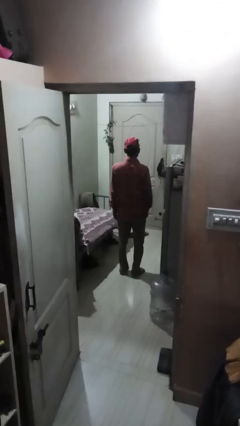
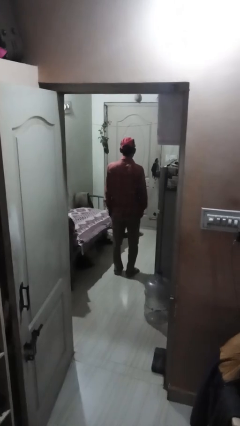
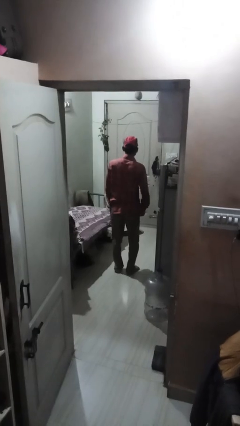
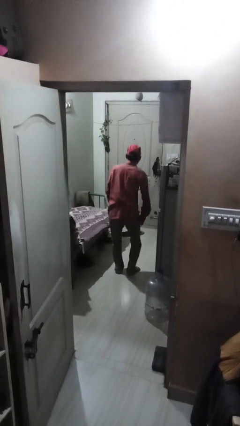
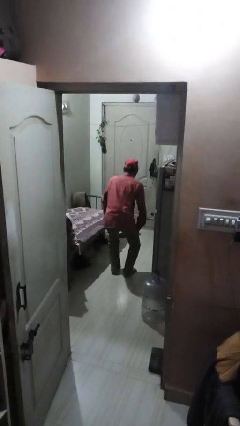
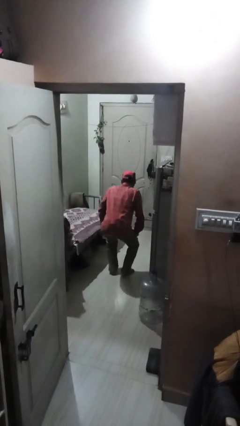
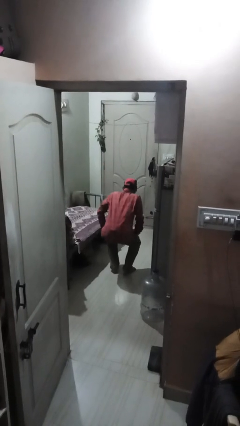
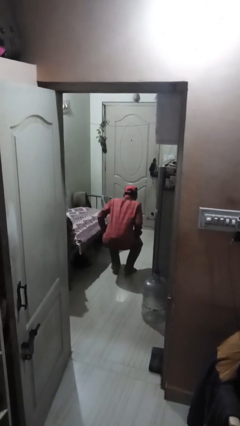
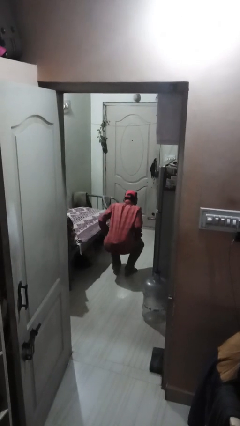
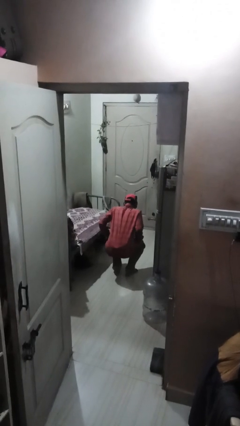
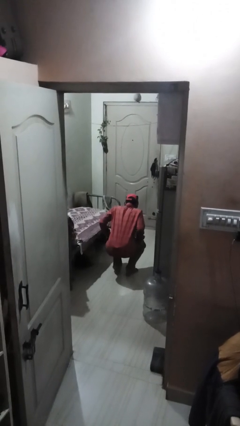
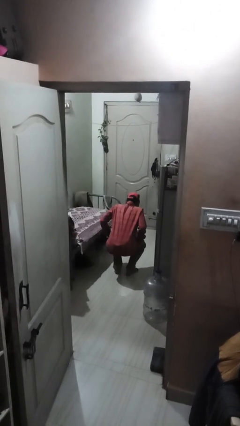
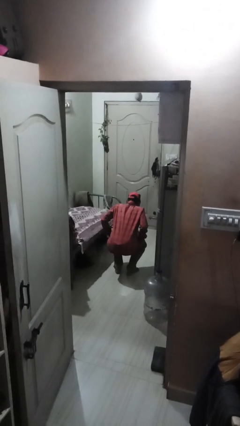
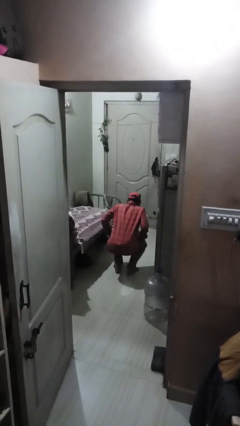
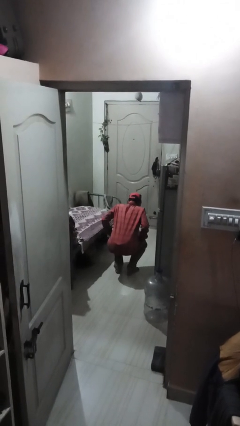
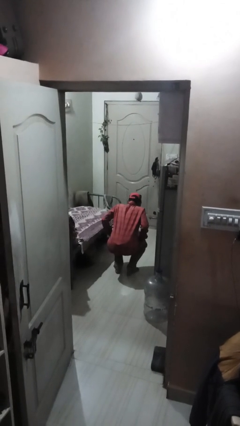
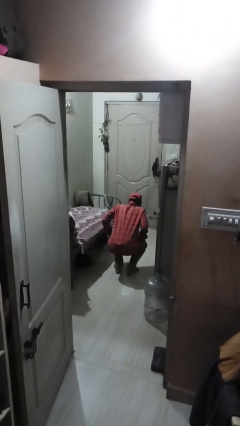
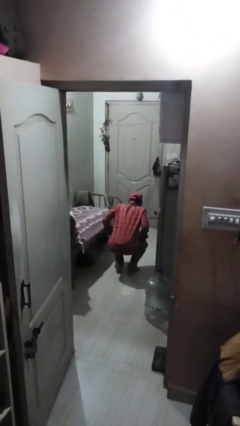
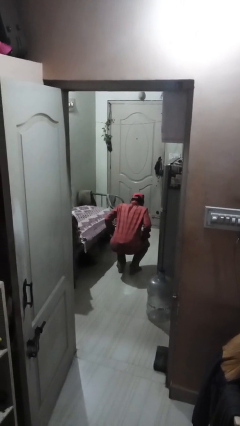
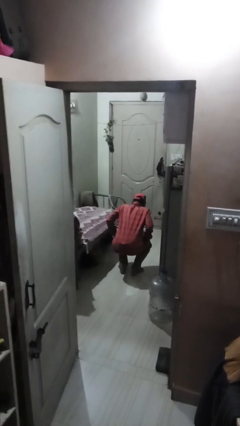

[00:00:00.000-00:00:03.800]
person squats

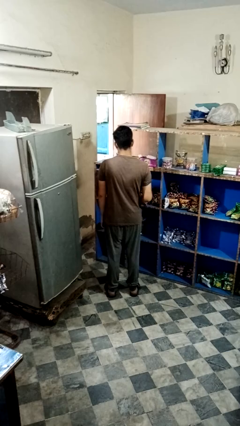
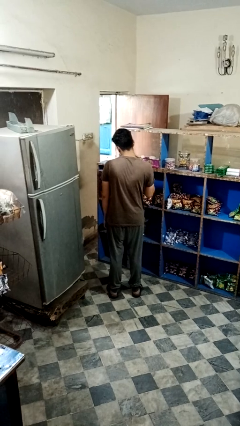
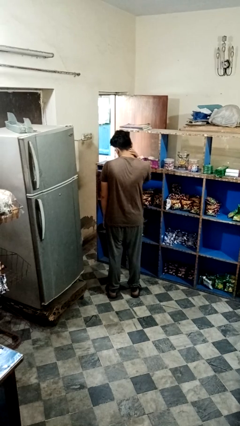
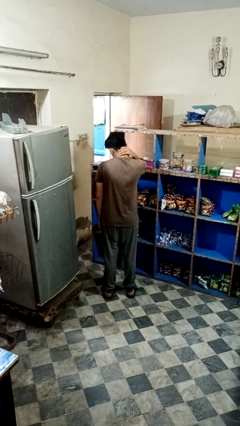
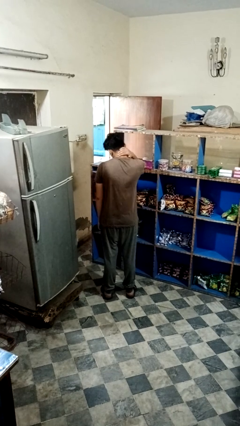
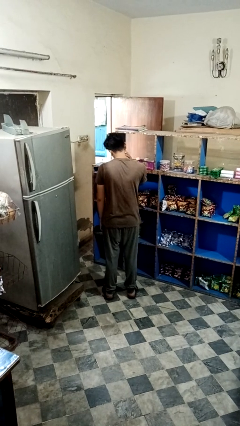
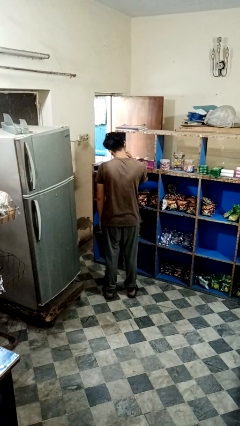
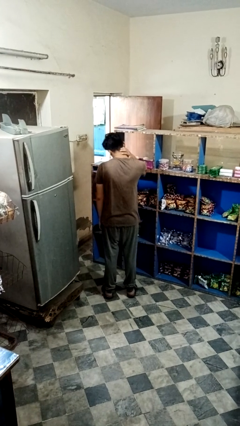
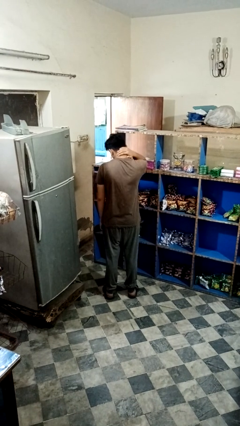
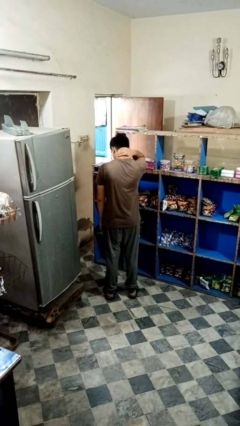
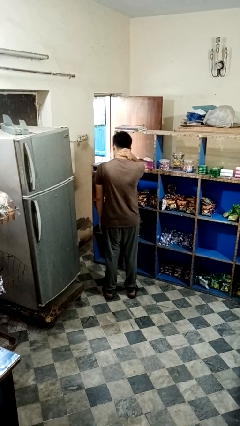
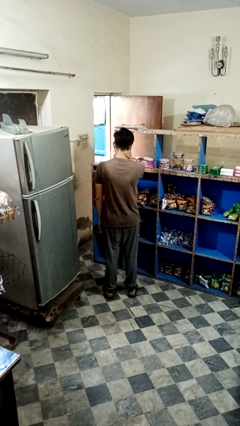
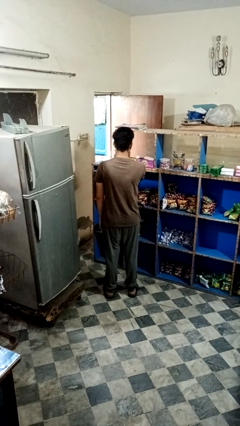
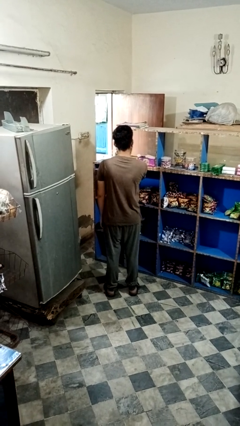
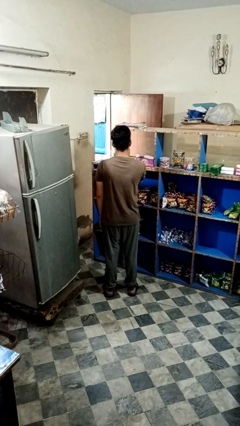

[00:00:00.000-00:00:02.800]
person rubs neck

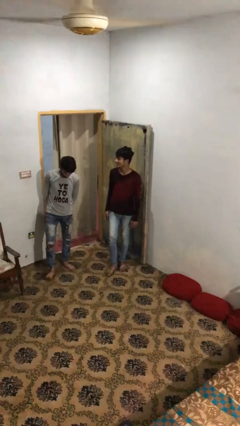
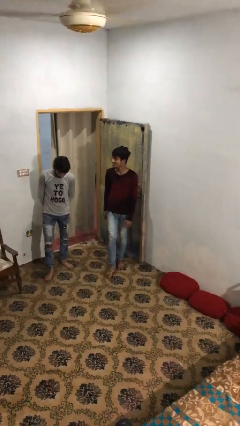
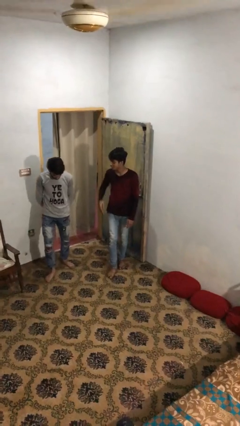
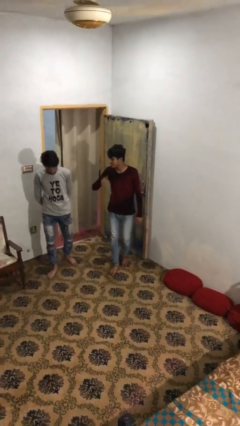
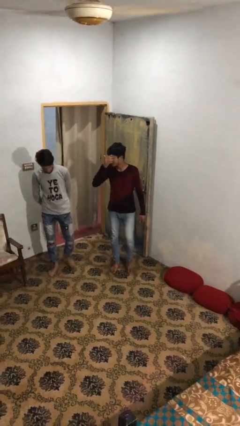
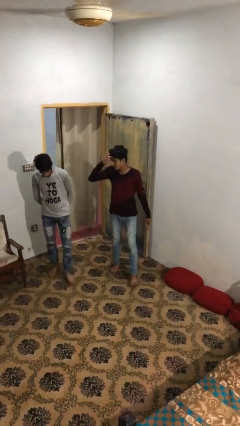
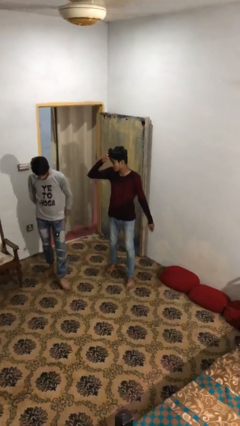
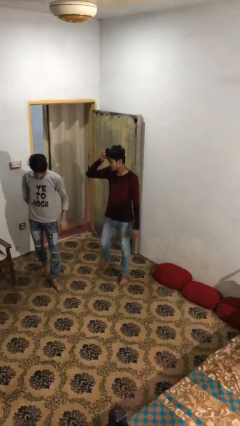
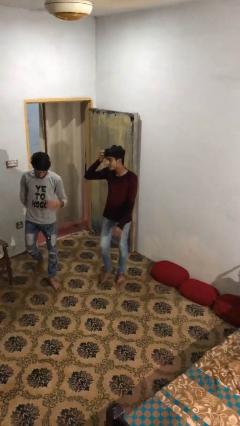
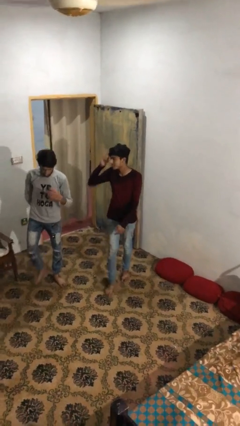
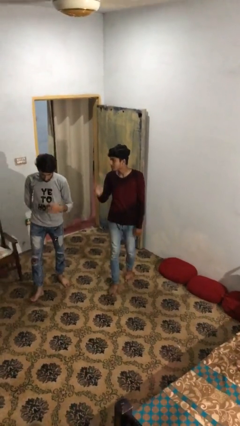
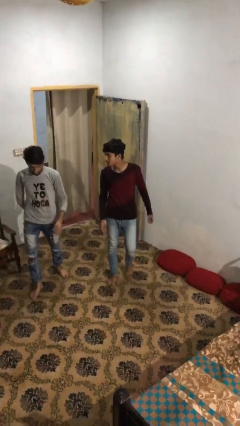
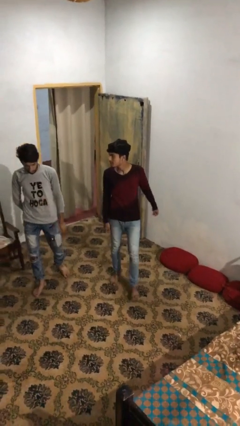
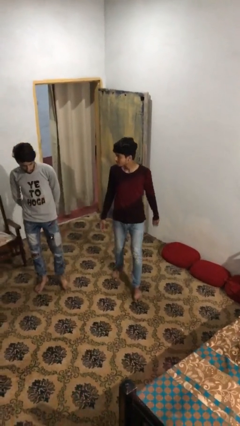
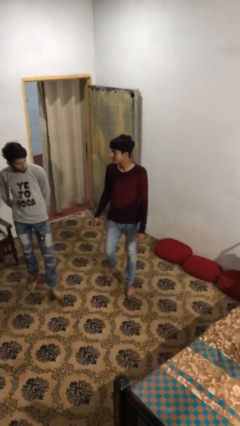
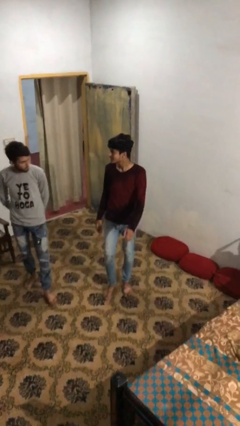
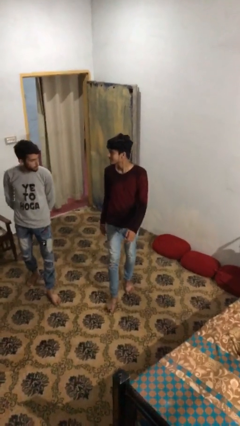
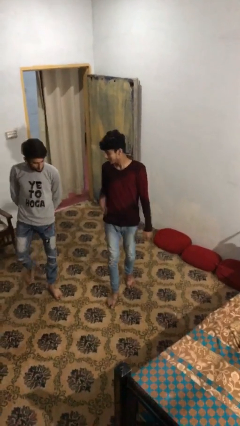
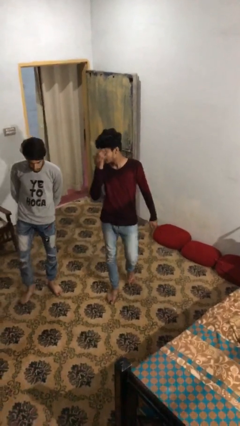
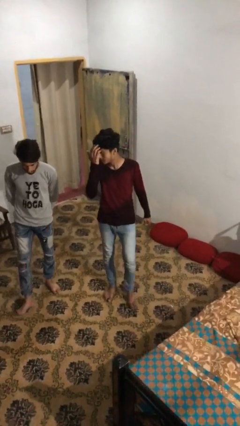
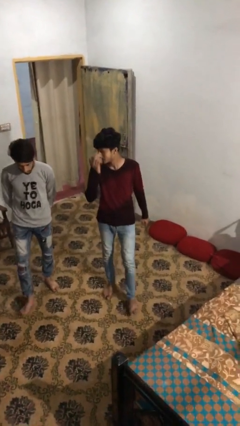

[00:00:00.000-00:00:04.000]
person talks to person

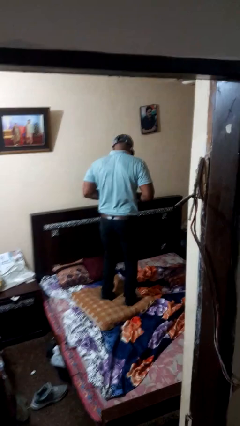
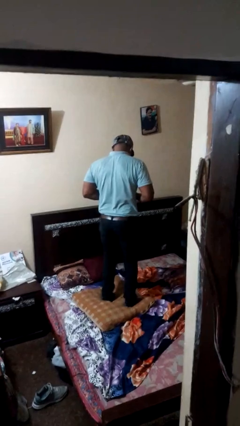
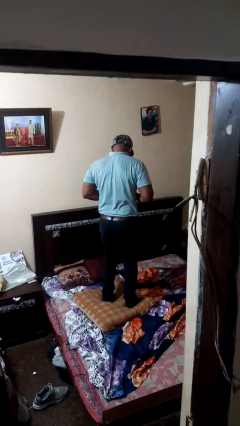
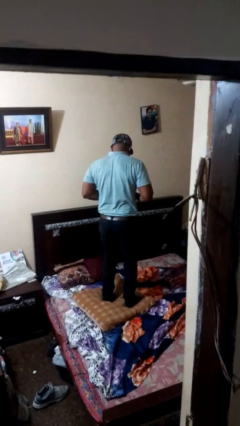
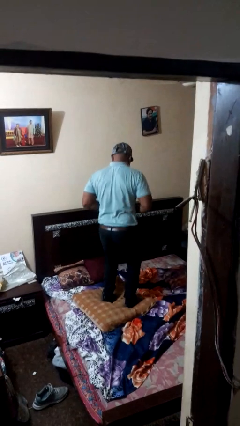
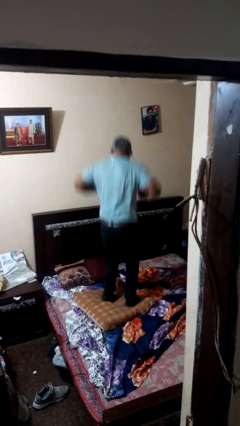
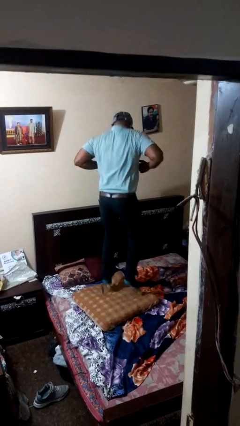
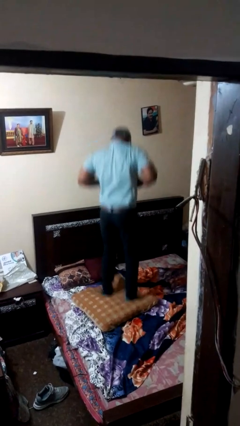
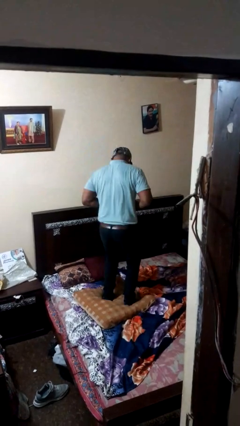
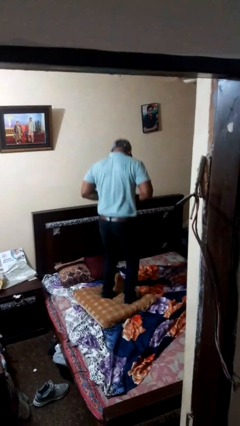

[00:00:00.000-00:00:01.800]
person jumps on bed

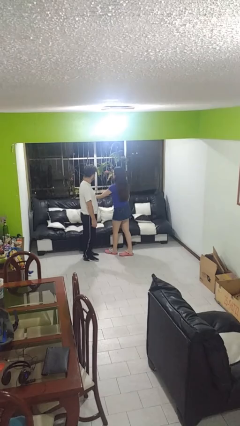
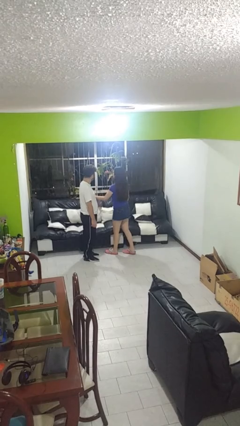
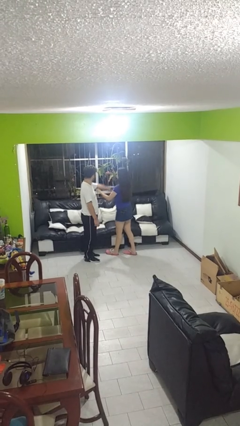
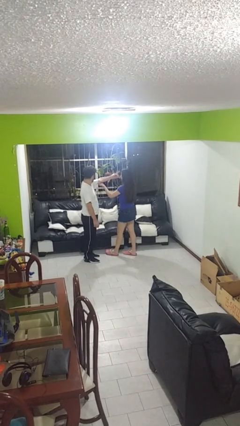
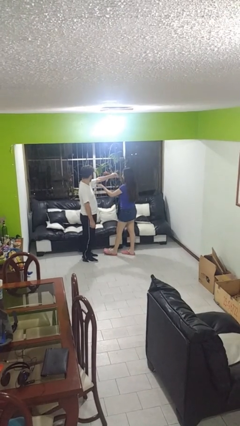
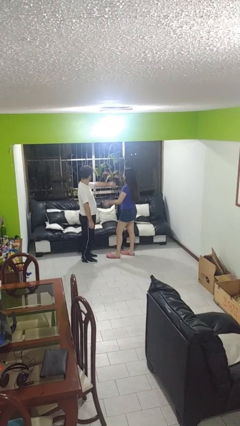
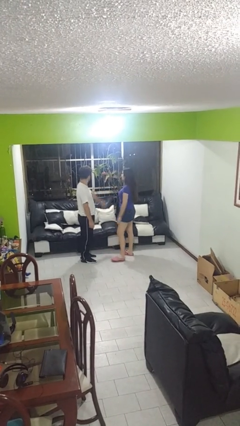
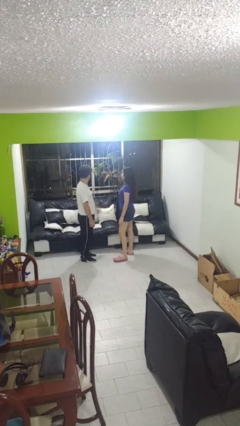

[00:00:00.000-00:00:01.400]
person grabs person by bicep

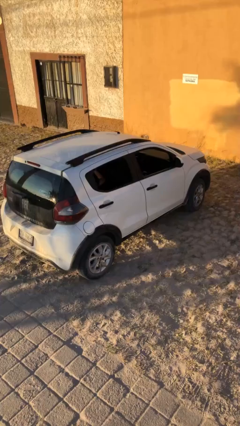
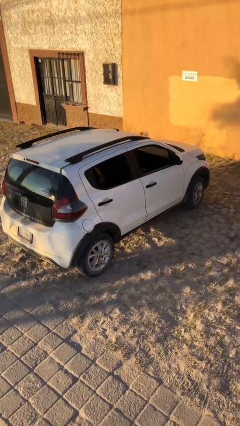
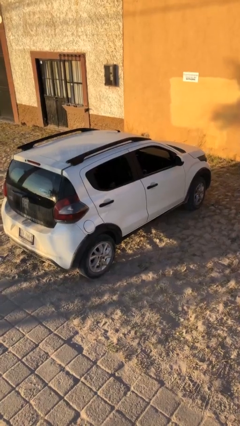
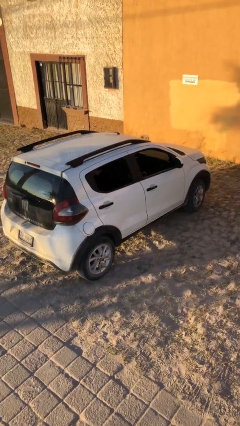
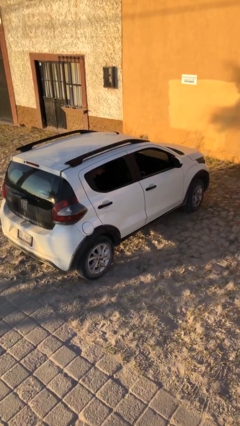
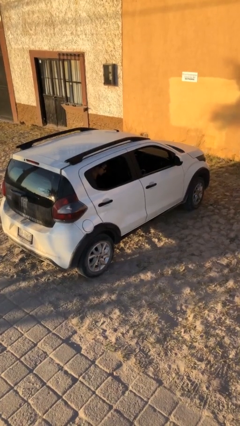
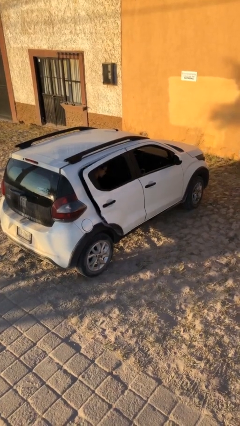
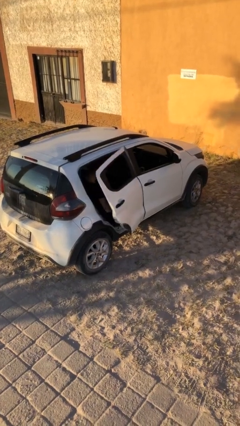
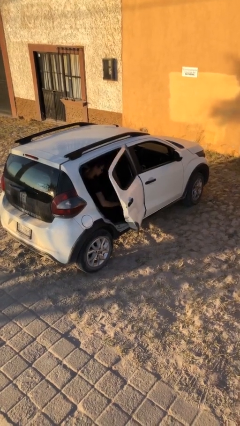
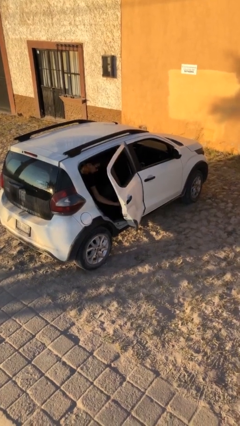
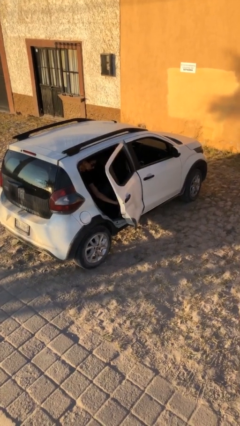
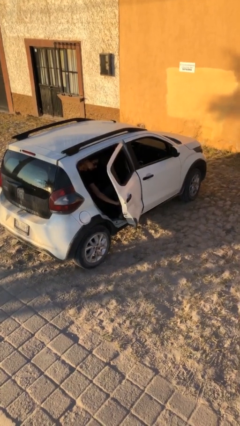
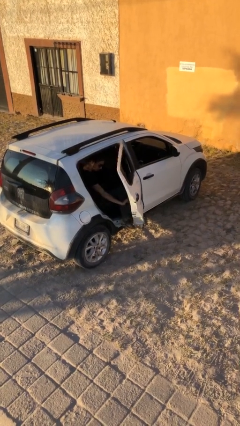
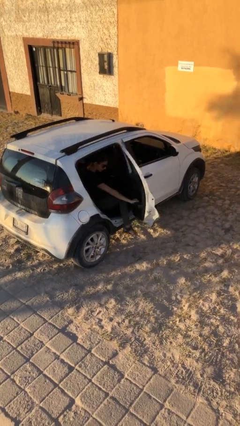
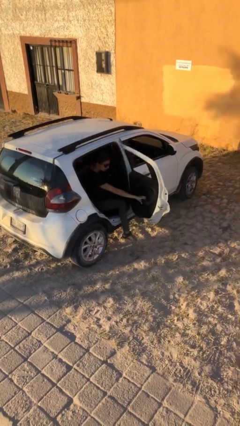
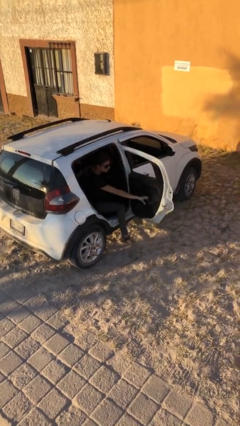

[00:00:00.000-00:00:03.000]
person opens car door

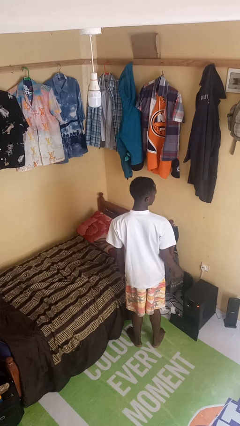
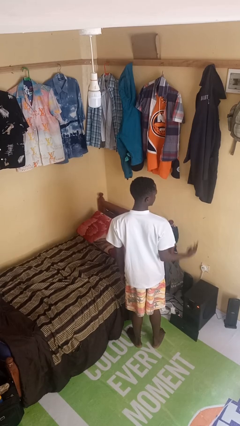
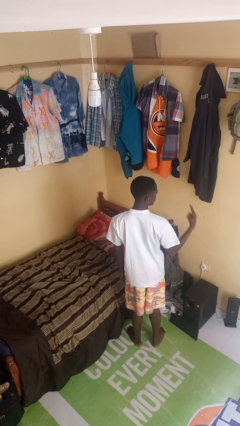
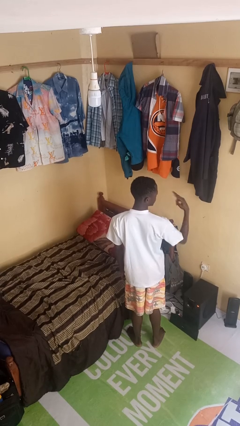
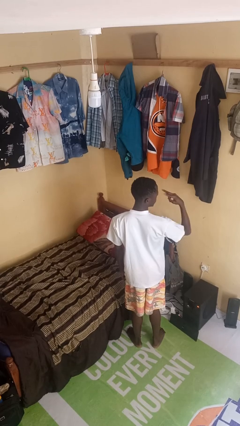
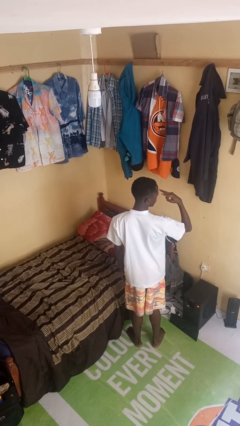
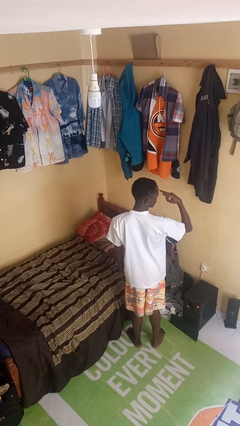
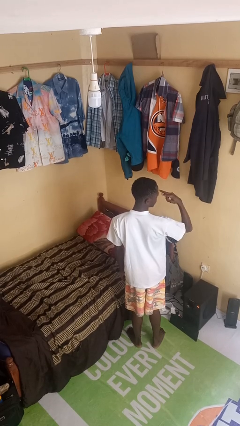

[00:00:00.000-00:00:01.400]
person gestures watch closely
